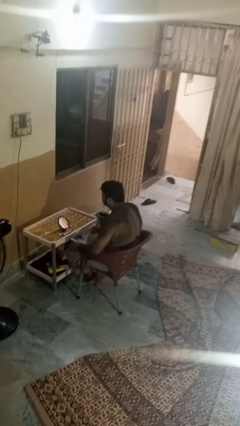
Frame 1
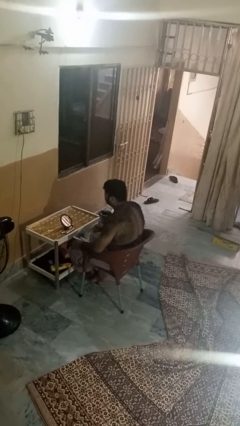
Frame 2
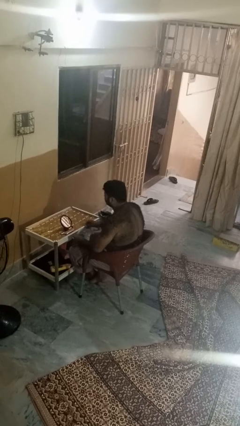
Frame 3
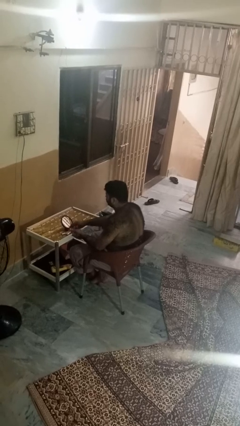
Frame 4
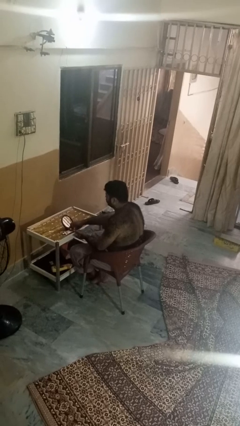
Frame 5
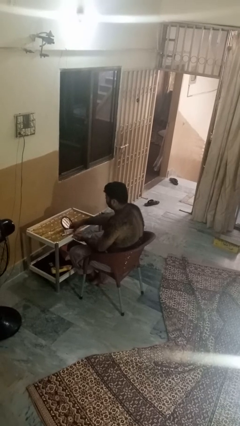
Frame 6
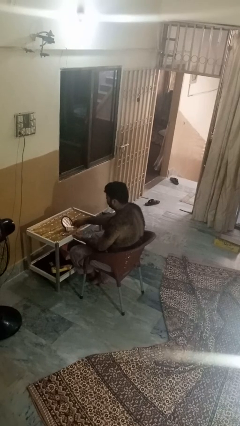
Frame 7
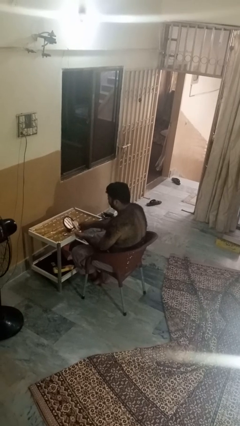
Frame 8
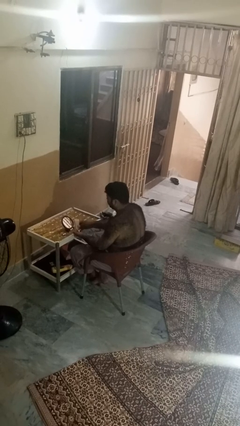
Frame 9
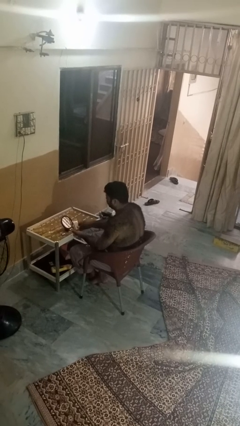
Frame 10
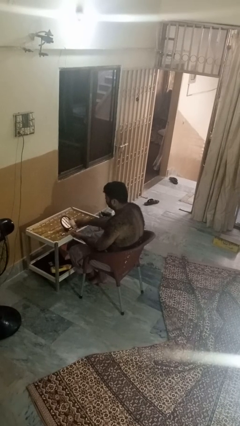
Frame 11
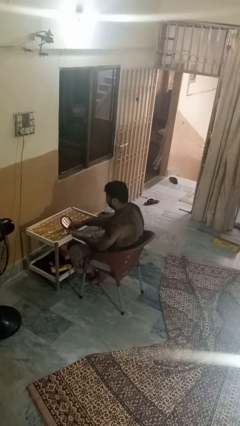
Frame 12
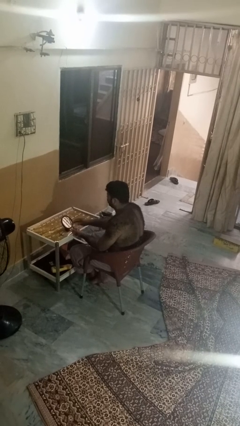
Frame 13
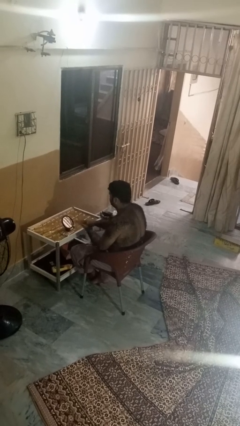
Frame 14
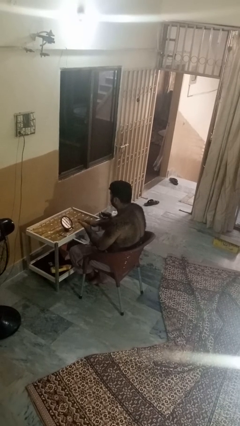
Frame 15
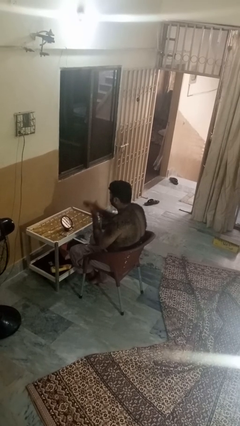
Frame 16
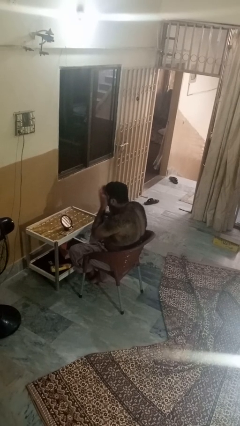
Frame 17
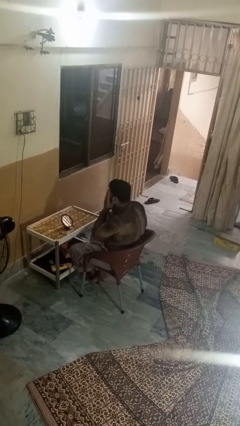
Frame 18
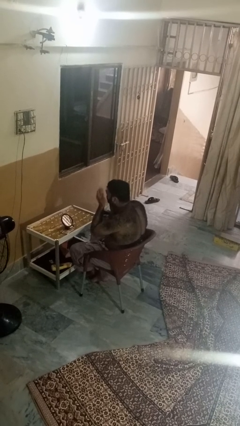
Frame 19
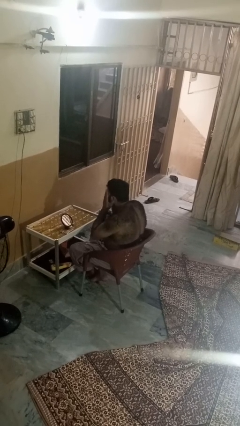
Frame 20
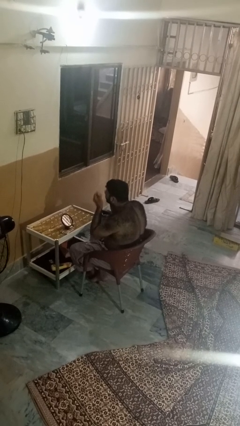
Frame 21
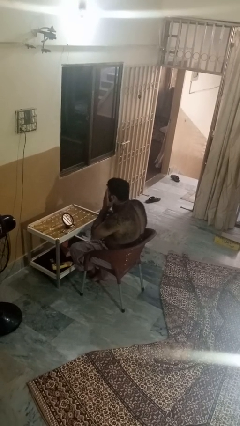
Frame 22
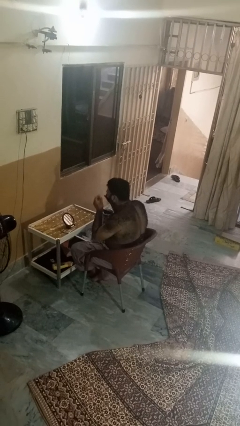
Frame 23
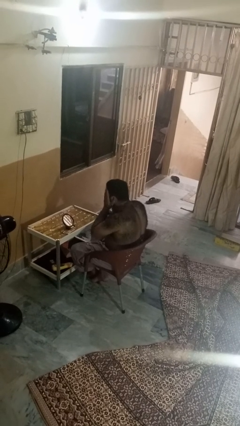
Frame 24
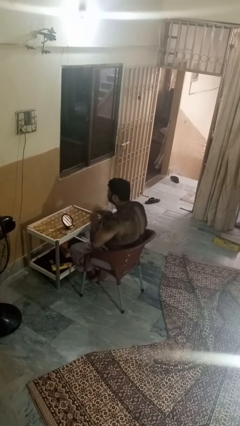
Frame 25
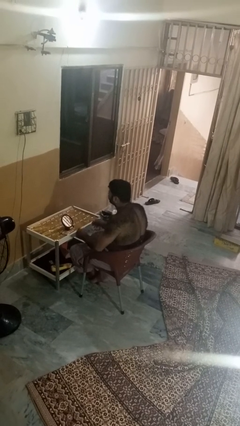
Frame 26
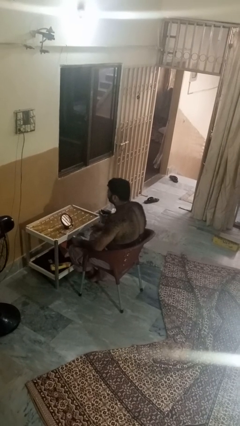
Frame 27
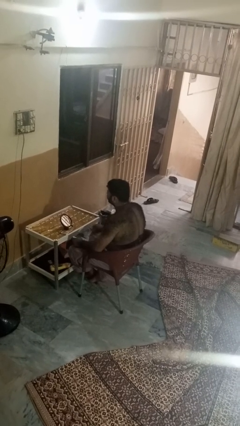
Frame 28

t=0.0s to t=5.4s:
person applies foundation makeup

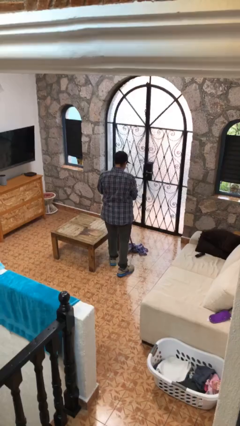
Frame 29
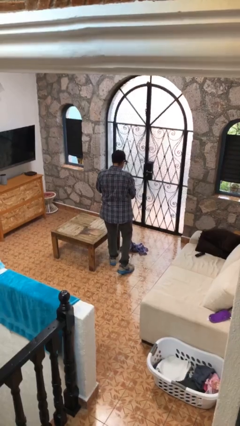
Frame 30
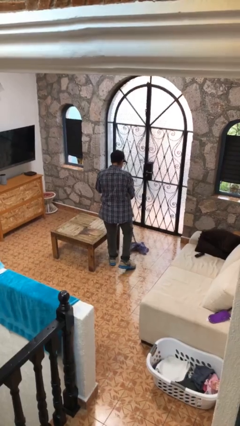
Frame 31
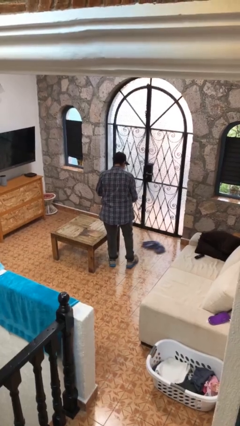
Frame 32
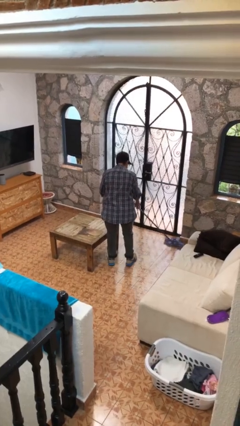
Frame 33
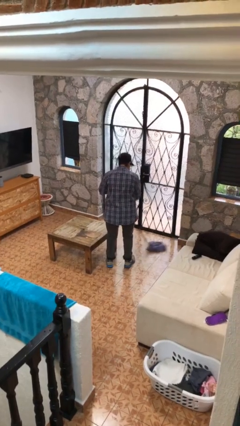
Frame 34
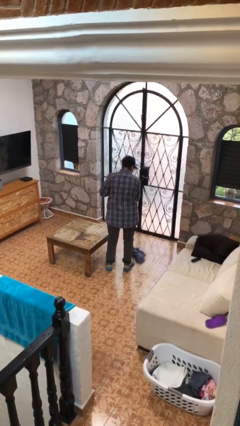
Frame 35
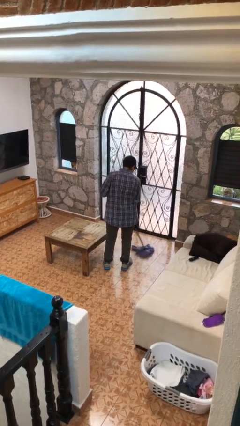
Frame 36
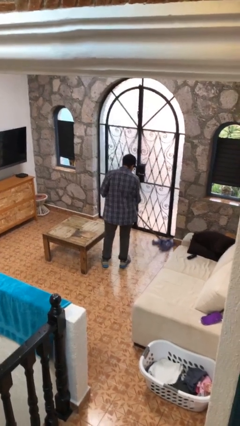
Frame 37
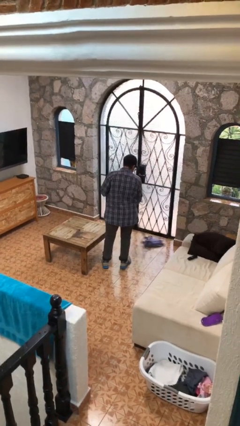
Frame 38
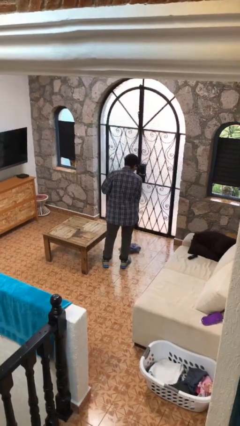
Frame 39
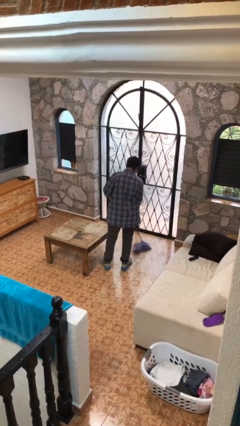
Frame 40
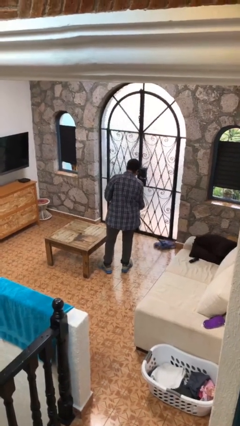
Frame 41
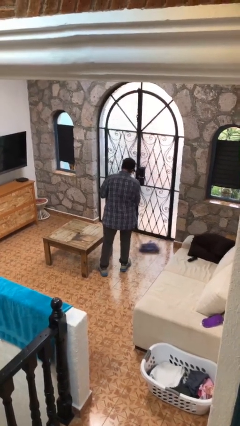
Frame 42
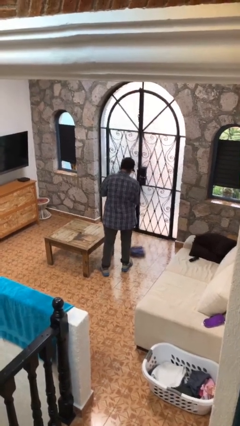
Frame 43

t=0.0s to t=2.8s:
person mops

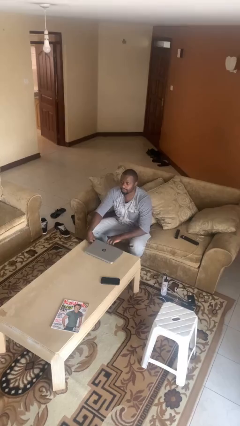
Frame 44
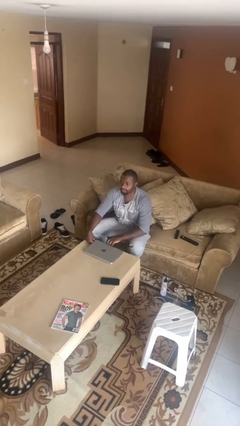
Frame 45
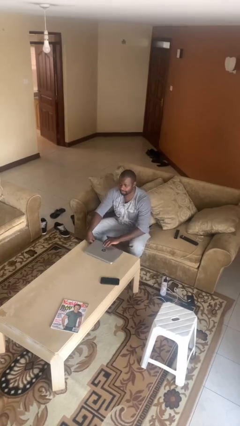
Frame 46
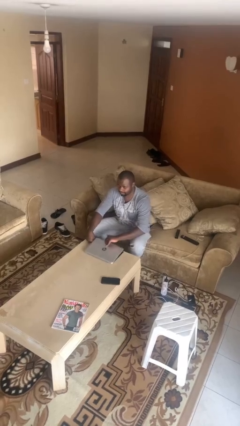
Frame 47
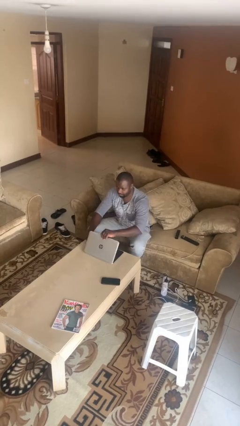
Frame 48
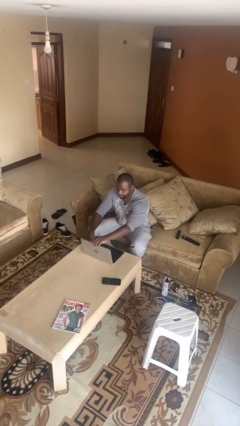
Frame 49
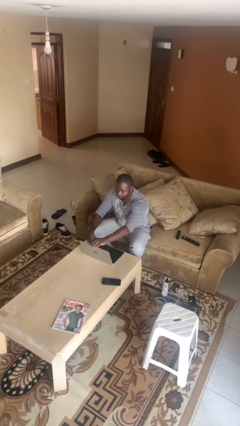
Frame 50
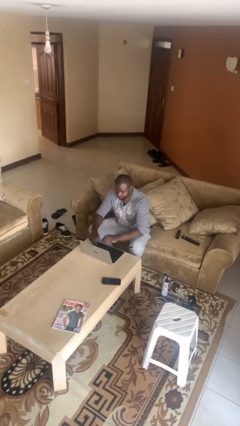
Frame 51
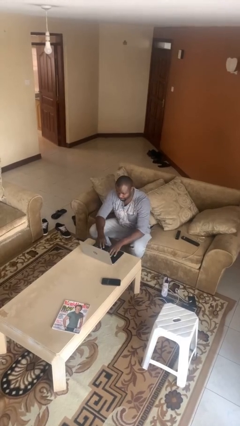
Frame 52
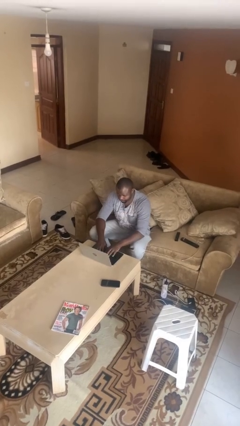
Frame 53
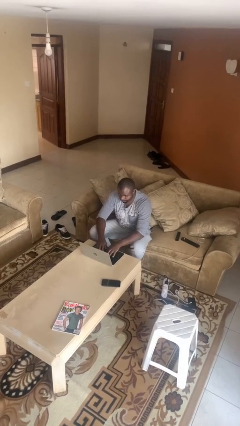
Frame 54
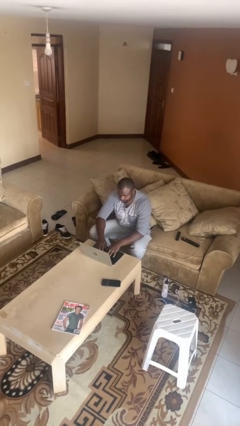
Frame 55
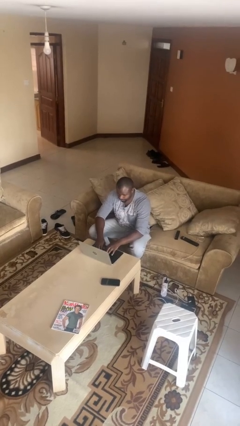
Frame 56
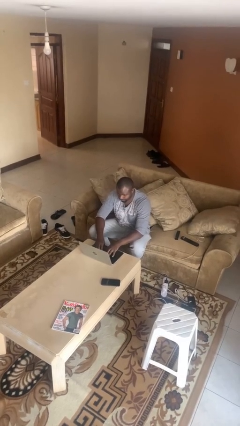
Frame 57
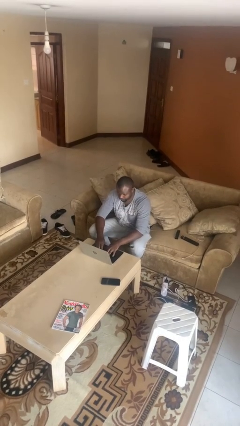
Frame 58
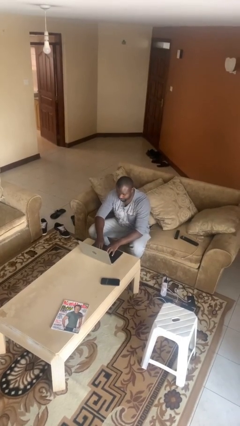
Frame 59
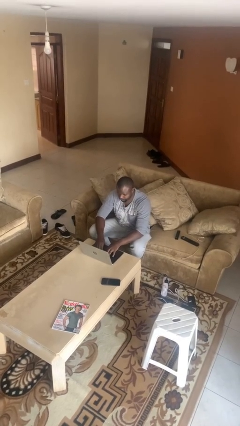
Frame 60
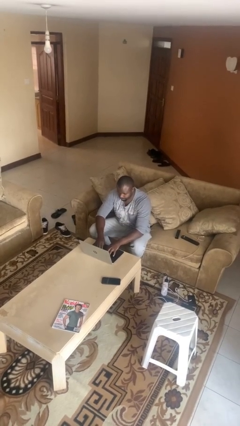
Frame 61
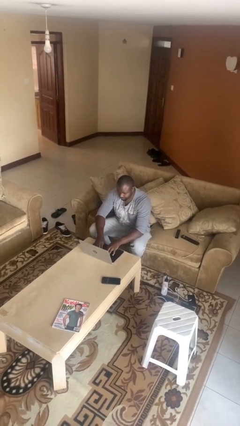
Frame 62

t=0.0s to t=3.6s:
person interacts with laptop

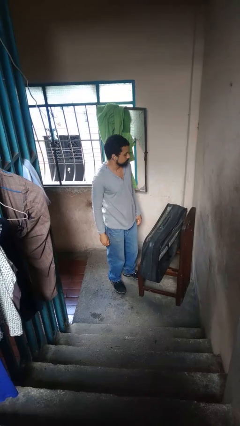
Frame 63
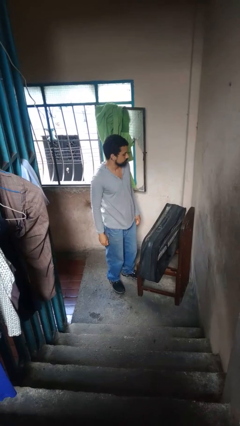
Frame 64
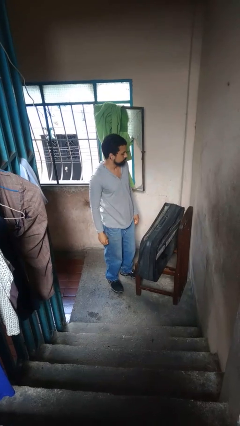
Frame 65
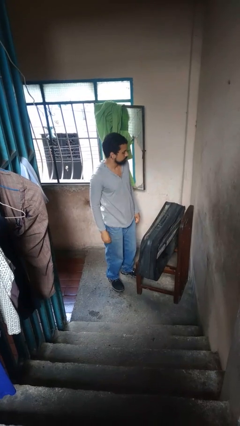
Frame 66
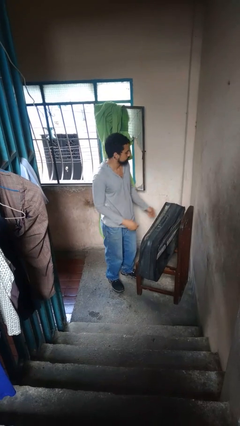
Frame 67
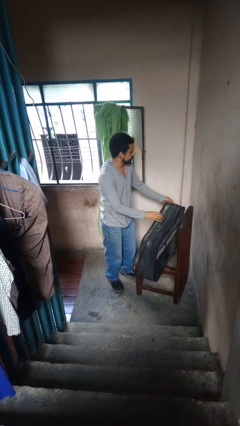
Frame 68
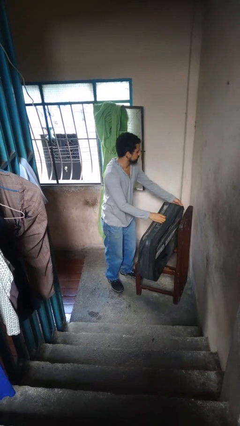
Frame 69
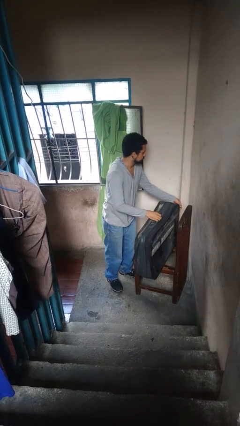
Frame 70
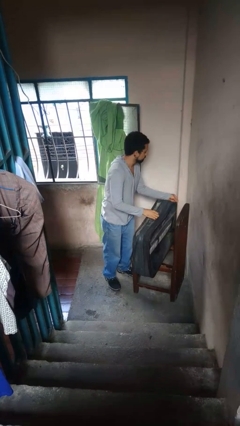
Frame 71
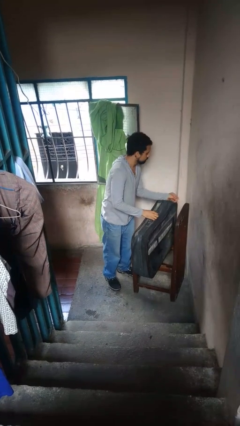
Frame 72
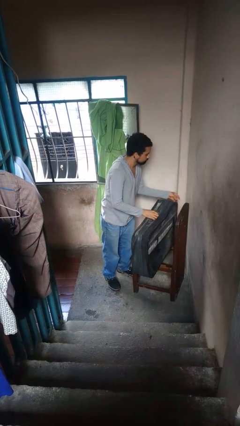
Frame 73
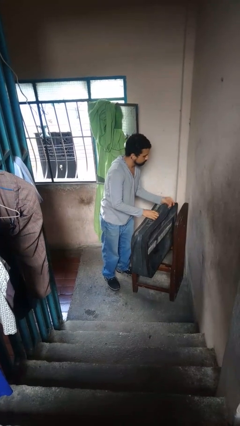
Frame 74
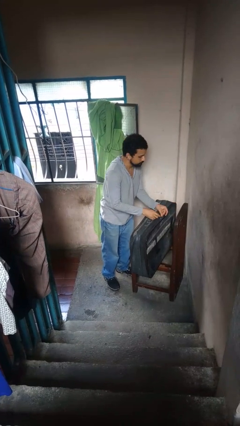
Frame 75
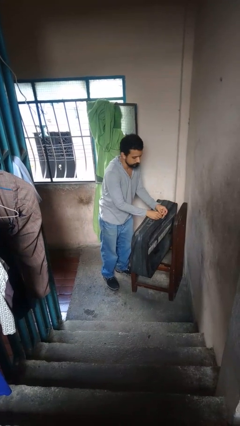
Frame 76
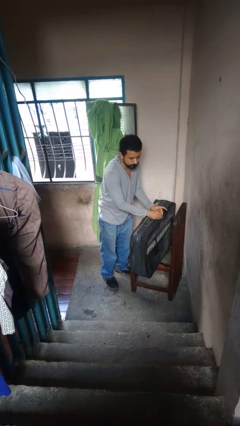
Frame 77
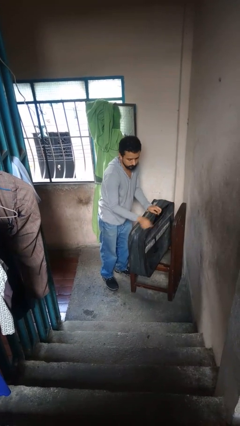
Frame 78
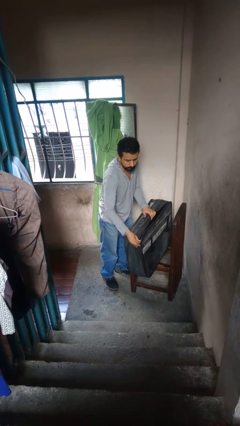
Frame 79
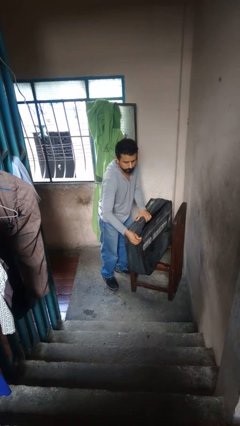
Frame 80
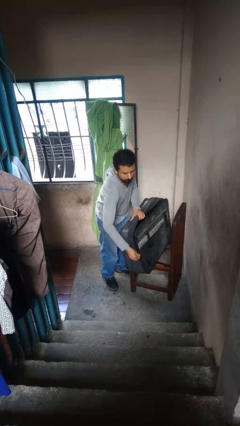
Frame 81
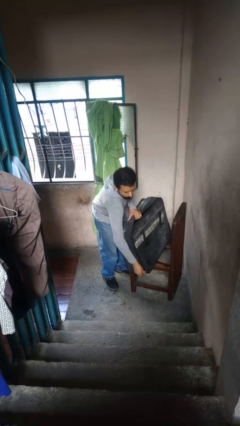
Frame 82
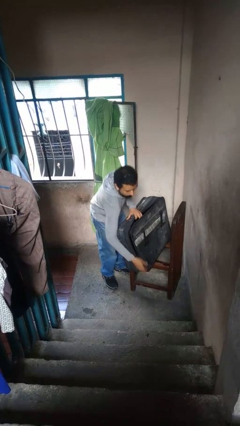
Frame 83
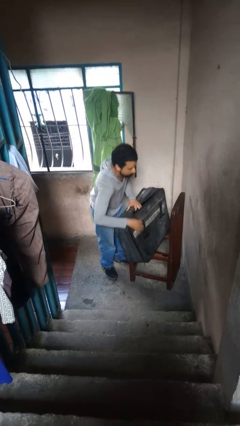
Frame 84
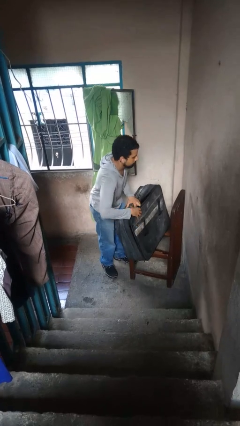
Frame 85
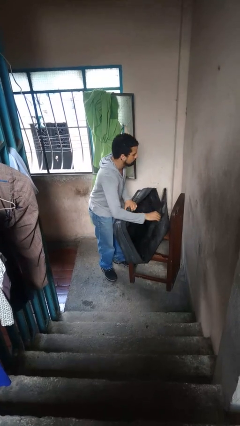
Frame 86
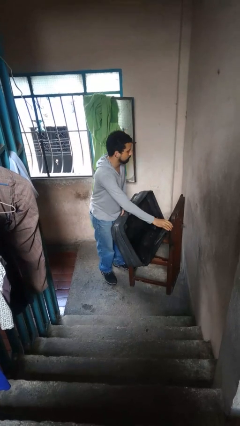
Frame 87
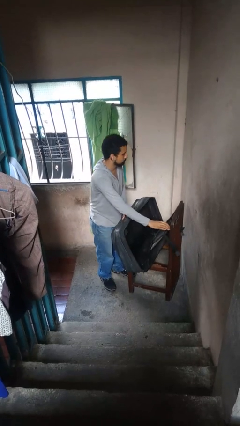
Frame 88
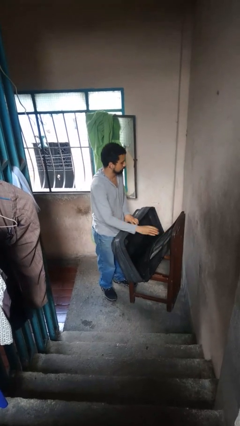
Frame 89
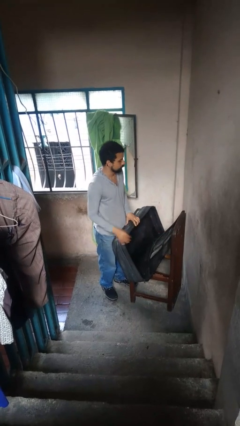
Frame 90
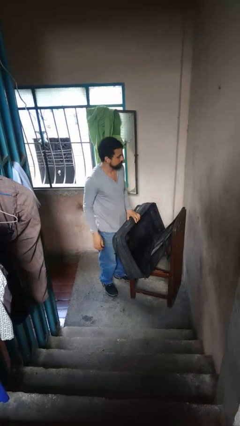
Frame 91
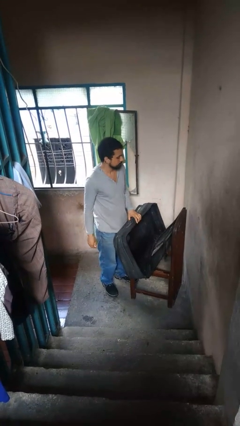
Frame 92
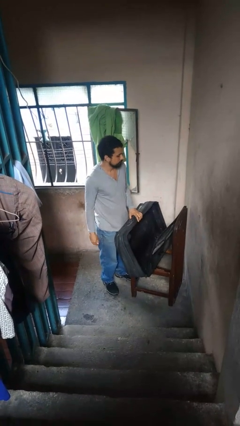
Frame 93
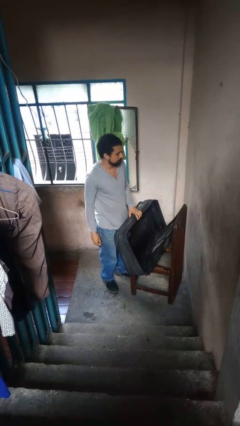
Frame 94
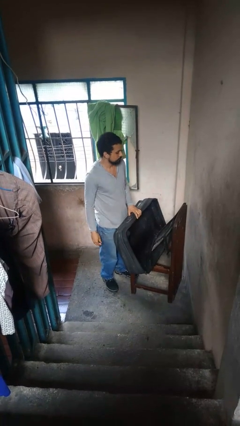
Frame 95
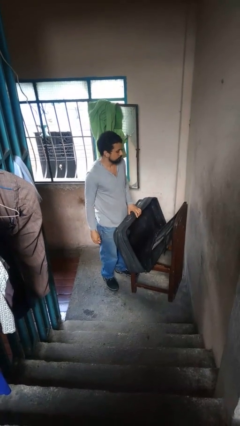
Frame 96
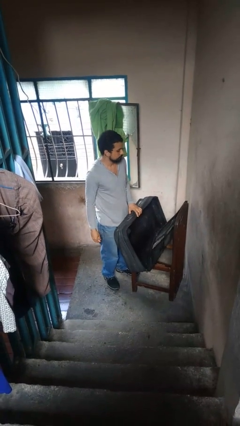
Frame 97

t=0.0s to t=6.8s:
person opens suitcase
